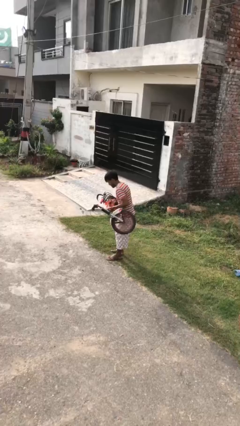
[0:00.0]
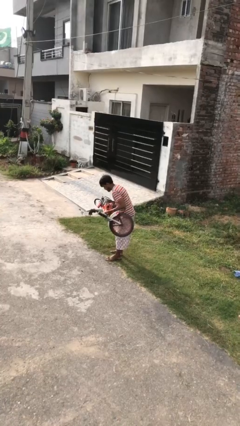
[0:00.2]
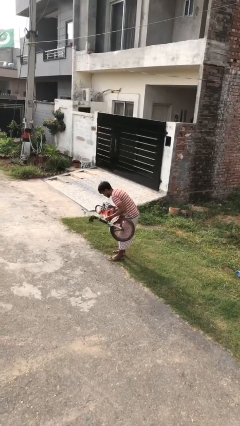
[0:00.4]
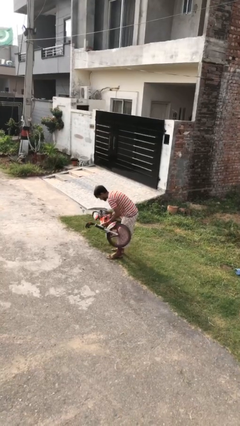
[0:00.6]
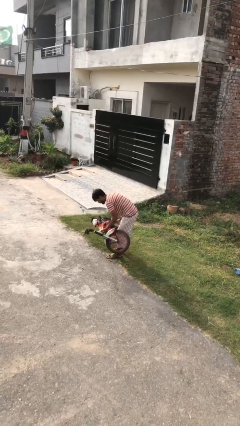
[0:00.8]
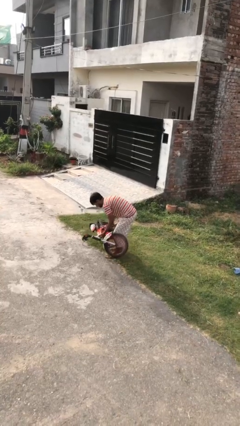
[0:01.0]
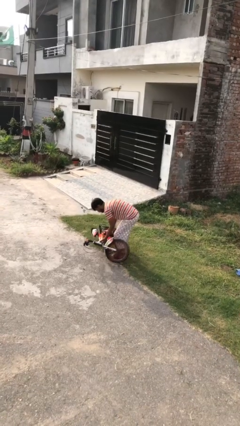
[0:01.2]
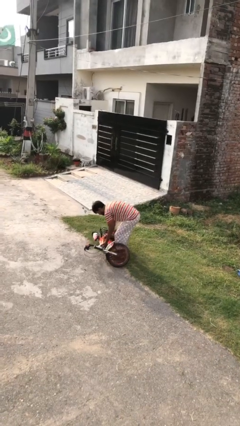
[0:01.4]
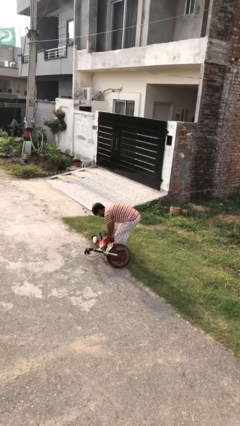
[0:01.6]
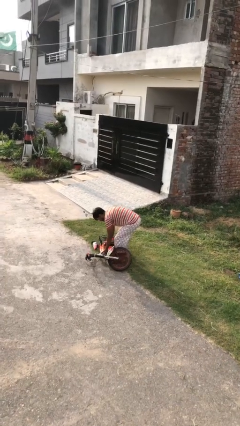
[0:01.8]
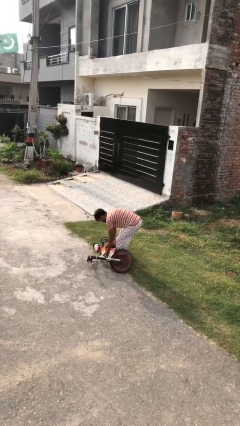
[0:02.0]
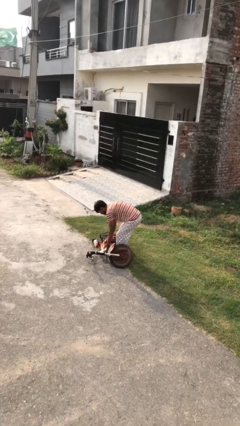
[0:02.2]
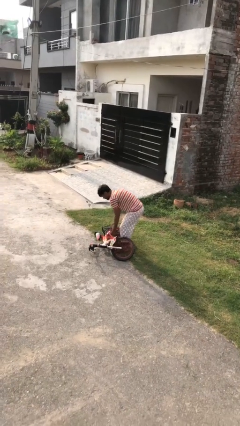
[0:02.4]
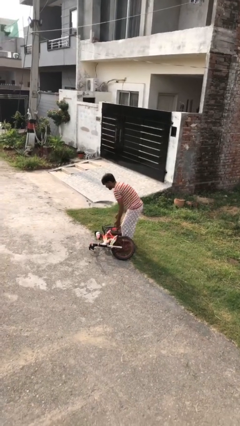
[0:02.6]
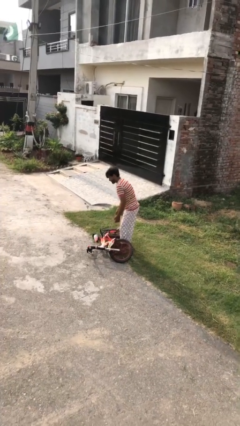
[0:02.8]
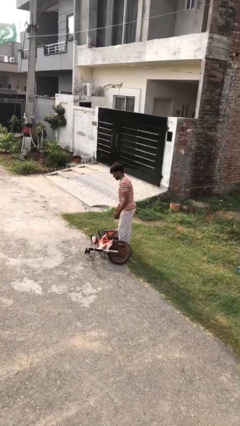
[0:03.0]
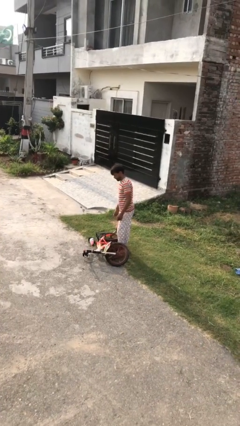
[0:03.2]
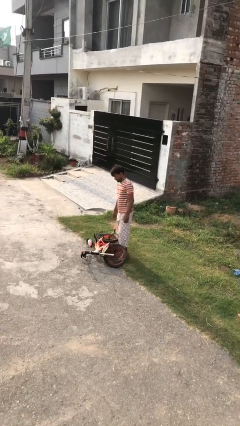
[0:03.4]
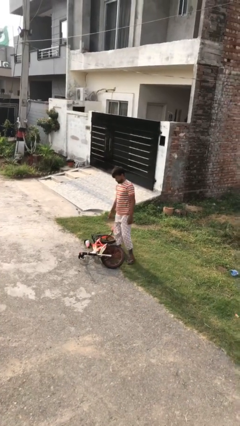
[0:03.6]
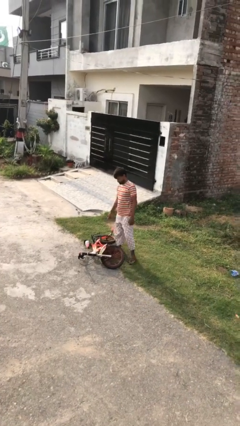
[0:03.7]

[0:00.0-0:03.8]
person puts down object on floor

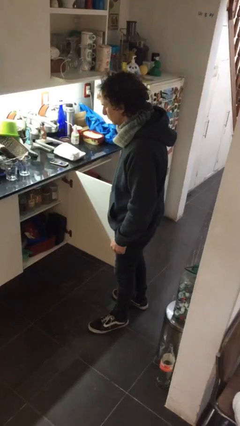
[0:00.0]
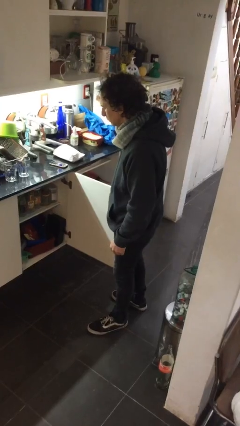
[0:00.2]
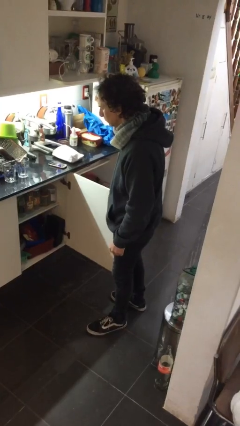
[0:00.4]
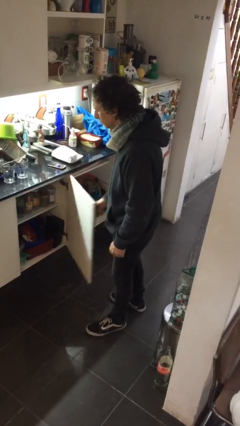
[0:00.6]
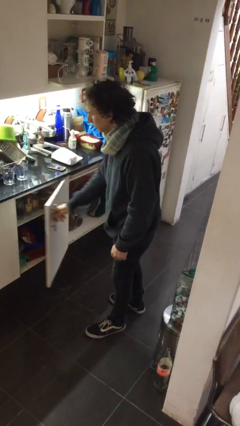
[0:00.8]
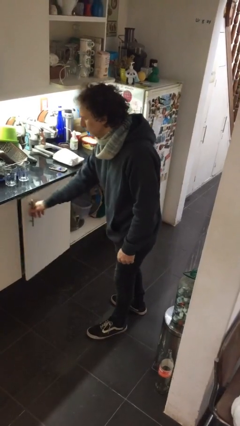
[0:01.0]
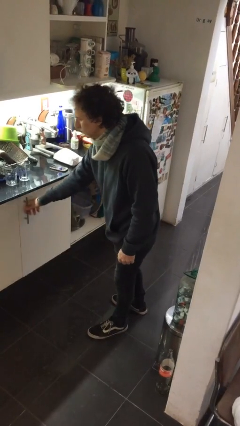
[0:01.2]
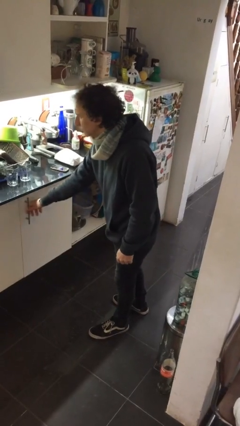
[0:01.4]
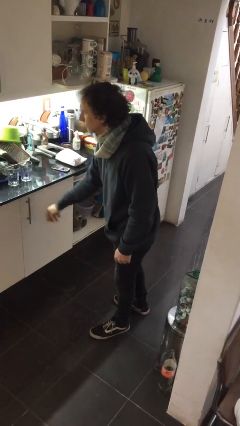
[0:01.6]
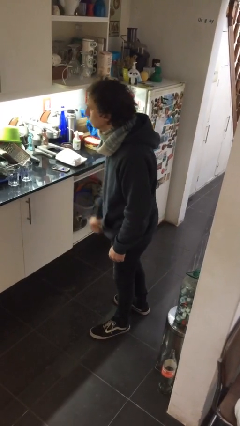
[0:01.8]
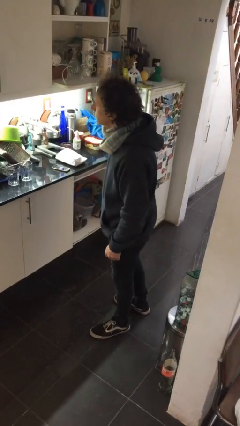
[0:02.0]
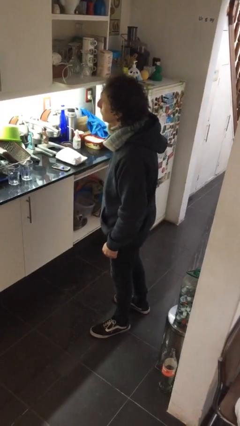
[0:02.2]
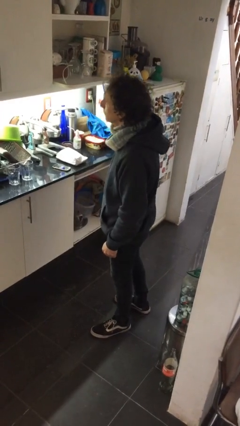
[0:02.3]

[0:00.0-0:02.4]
person closes cabinet

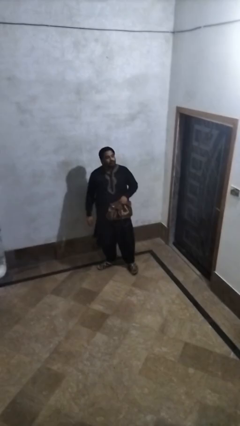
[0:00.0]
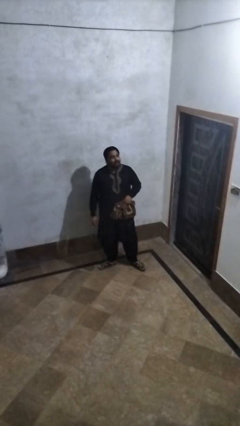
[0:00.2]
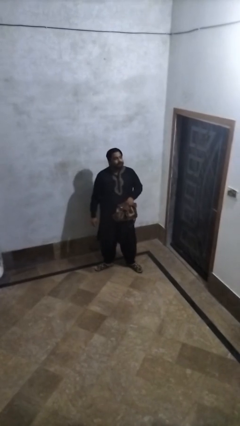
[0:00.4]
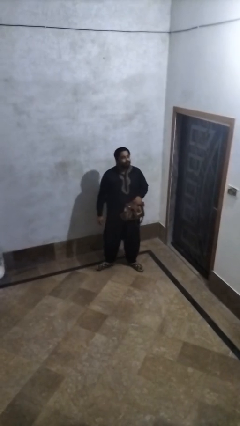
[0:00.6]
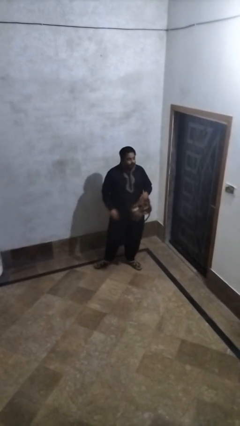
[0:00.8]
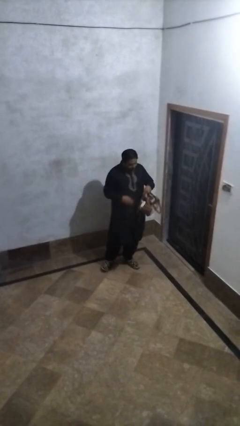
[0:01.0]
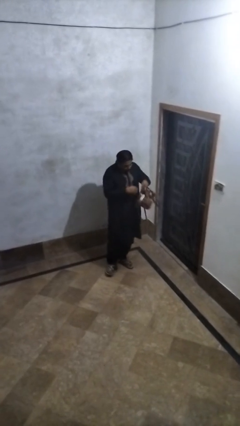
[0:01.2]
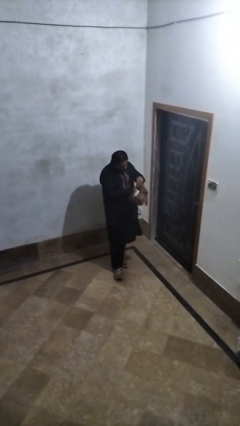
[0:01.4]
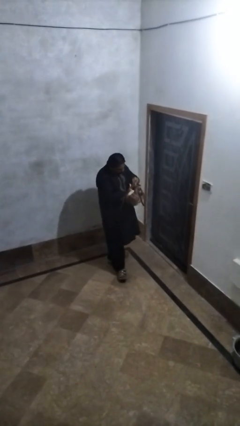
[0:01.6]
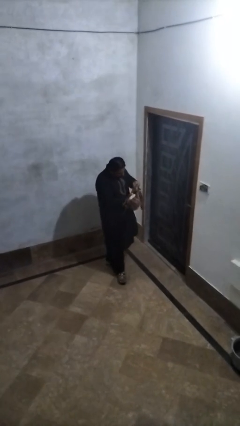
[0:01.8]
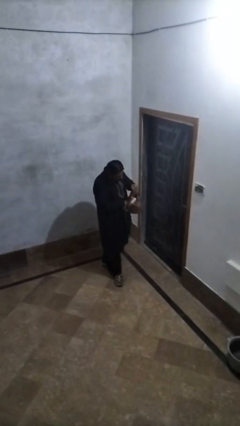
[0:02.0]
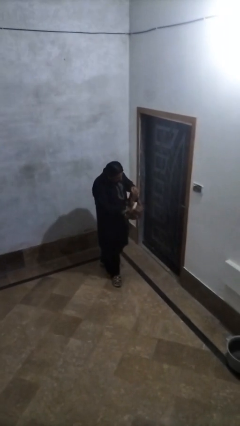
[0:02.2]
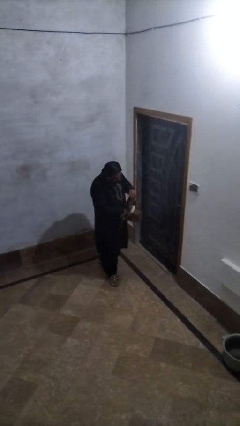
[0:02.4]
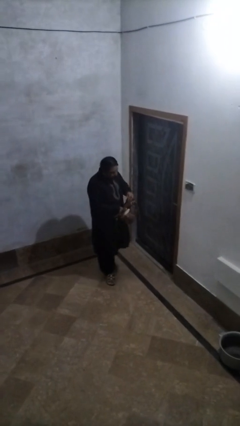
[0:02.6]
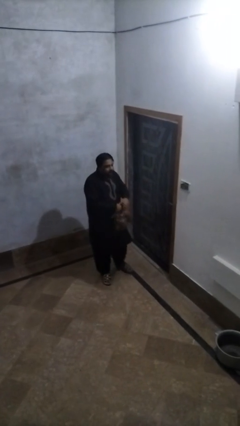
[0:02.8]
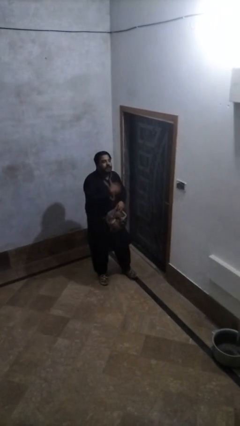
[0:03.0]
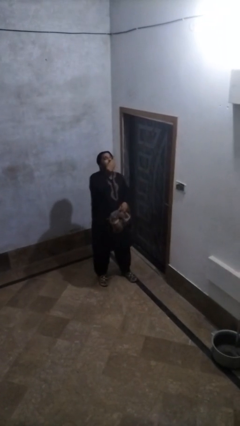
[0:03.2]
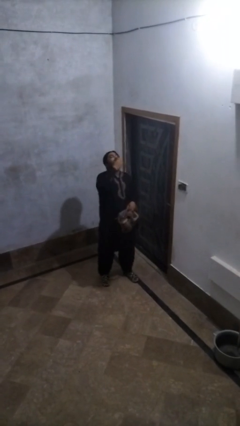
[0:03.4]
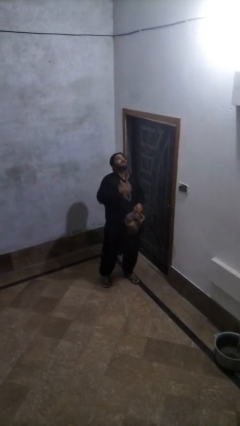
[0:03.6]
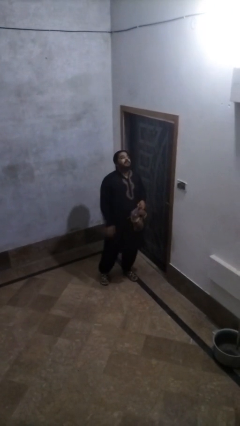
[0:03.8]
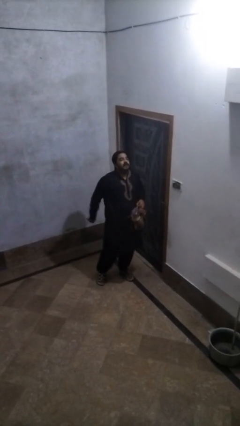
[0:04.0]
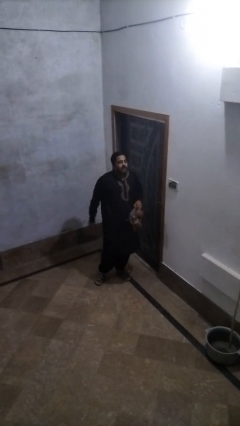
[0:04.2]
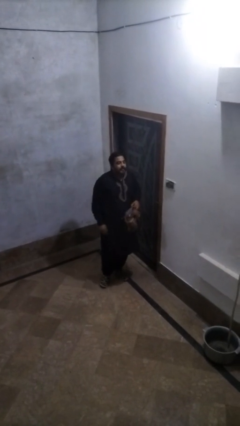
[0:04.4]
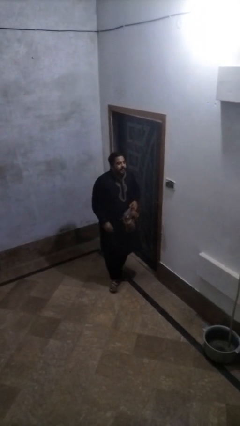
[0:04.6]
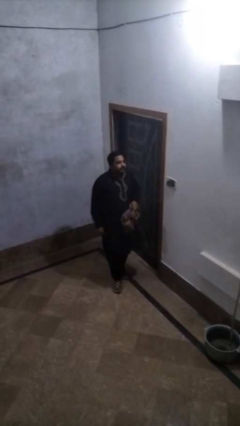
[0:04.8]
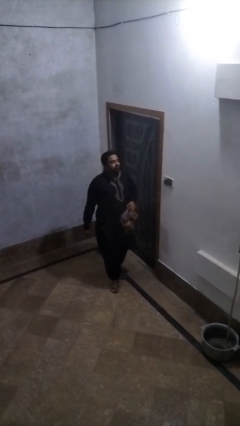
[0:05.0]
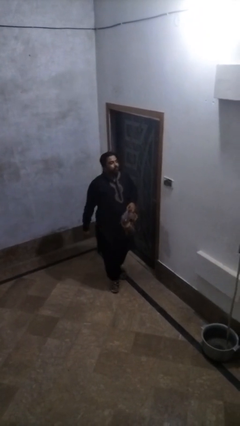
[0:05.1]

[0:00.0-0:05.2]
person eats snack from bag

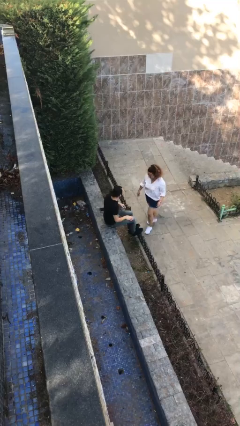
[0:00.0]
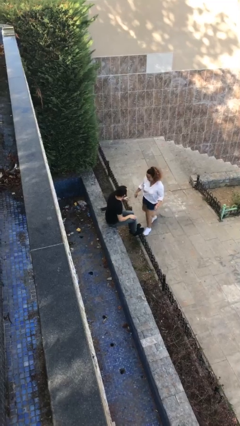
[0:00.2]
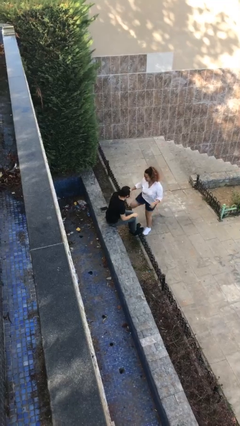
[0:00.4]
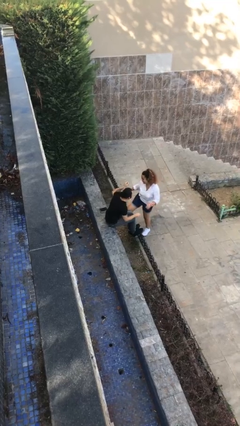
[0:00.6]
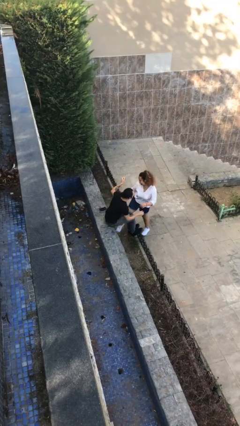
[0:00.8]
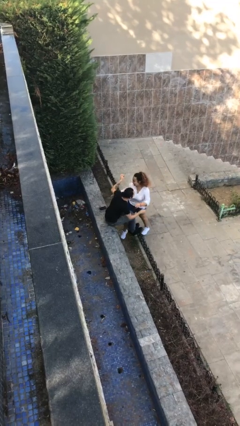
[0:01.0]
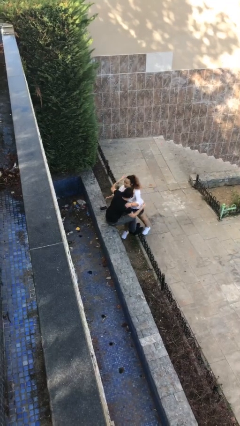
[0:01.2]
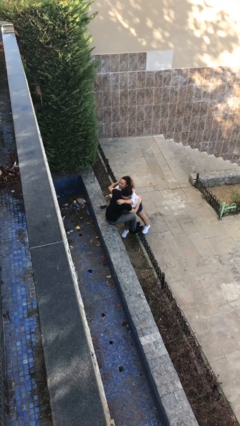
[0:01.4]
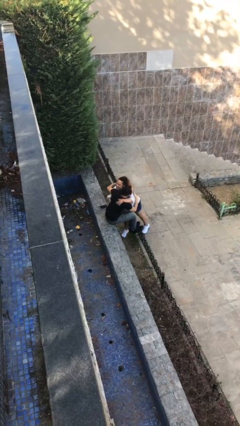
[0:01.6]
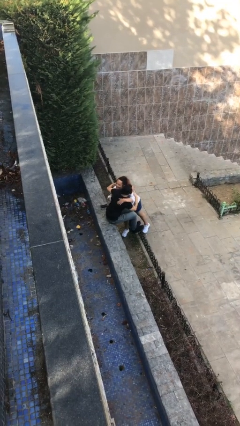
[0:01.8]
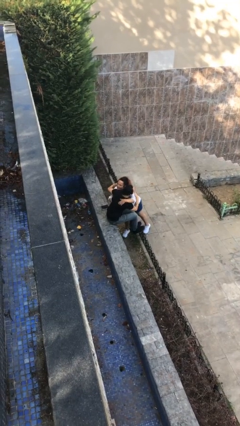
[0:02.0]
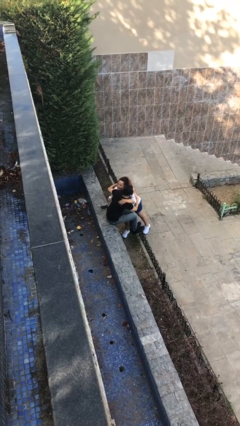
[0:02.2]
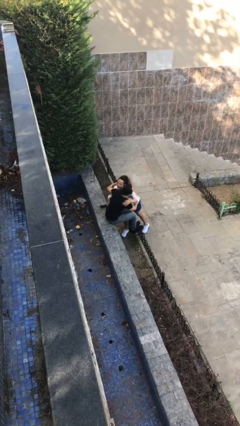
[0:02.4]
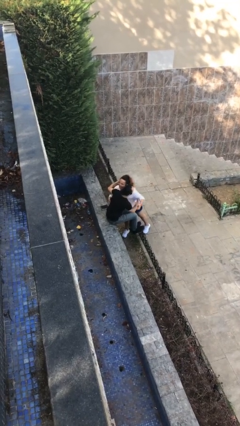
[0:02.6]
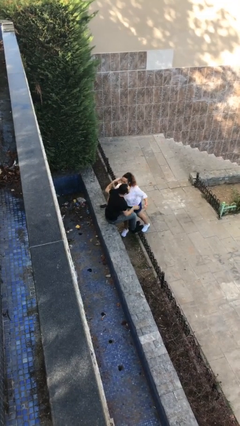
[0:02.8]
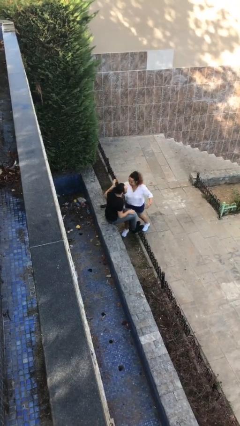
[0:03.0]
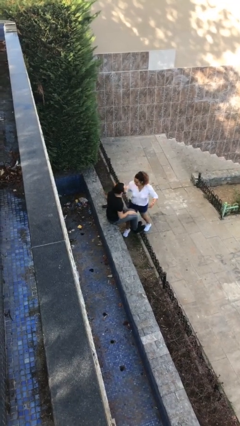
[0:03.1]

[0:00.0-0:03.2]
person embraces person

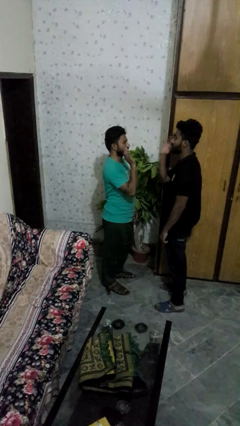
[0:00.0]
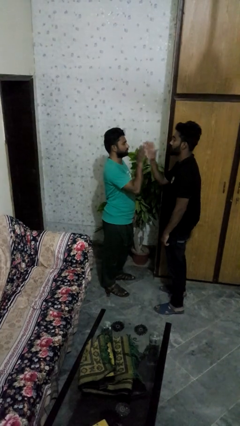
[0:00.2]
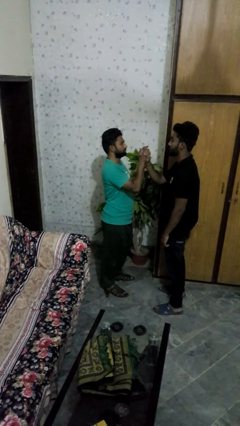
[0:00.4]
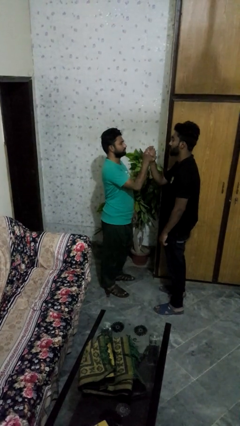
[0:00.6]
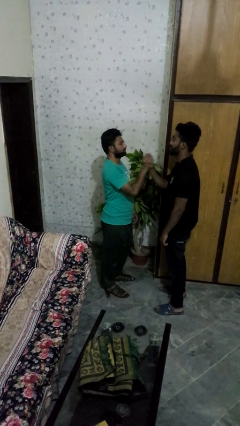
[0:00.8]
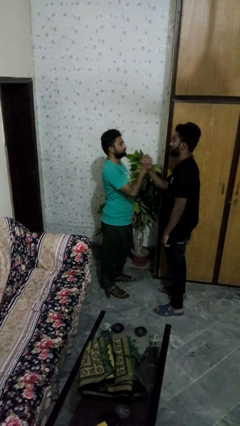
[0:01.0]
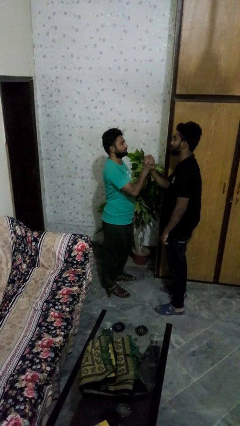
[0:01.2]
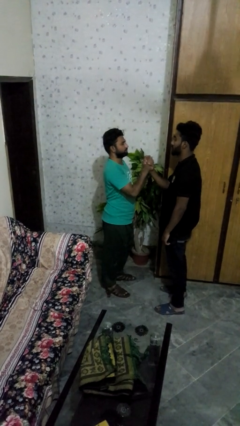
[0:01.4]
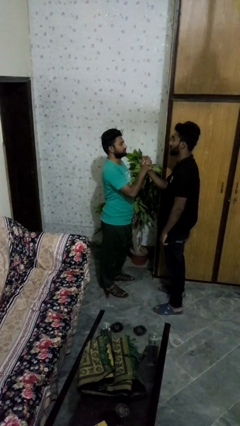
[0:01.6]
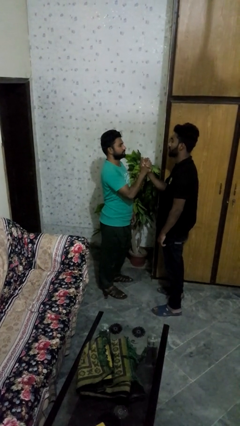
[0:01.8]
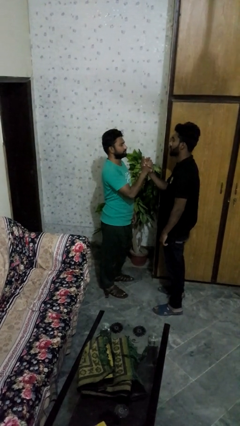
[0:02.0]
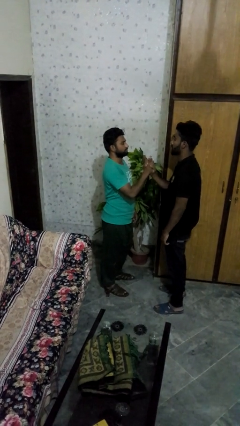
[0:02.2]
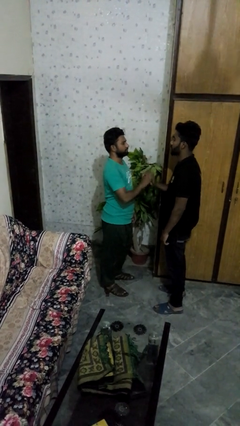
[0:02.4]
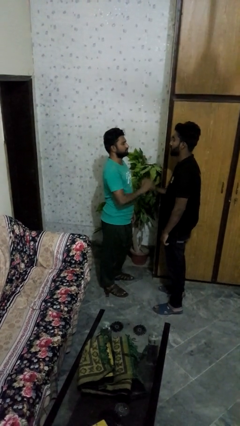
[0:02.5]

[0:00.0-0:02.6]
person highfives hand

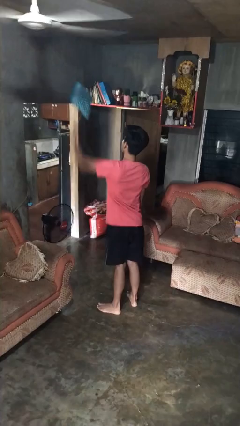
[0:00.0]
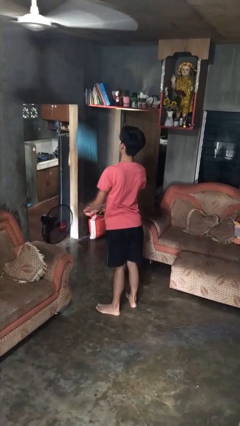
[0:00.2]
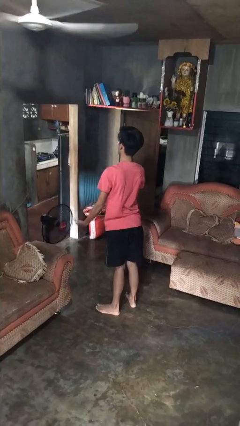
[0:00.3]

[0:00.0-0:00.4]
person drops object

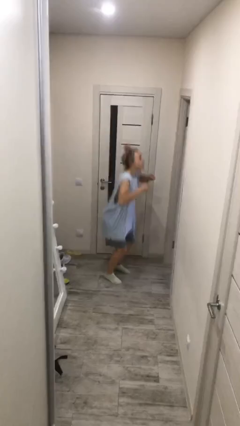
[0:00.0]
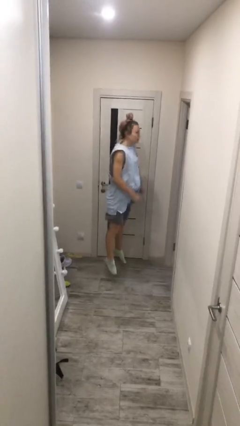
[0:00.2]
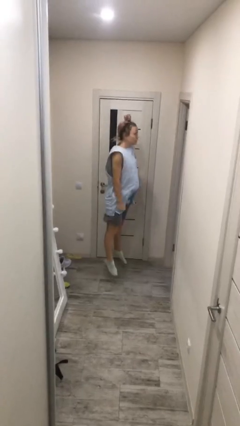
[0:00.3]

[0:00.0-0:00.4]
person jumps
